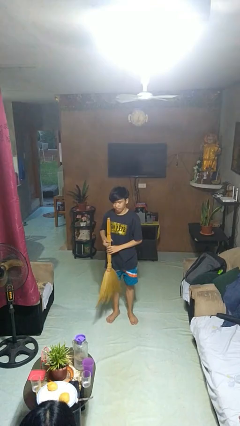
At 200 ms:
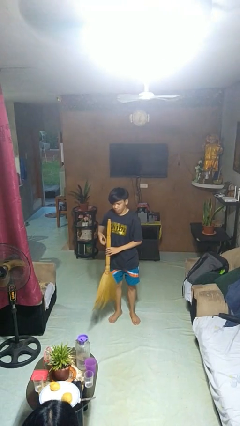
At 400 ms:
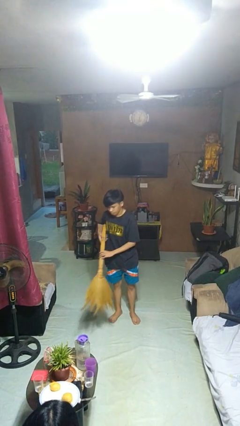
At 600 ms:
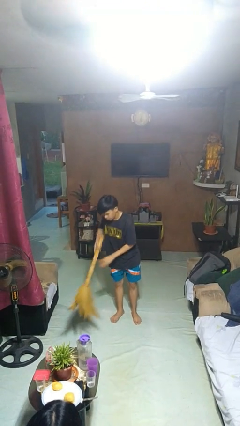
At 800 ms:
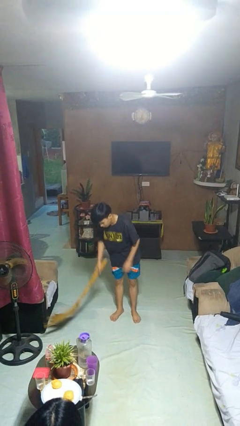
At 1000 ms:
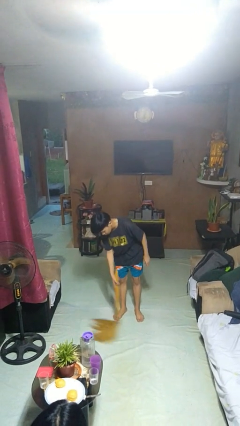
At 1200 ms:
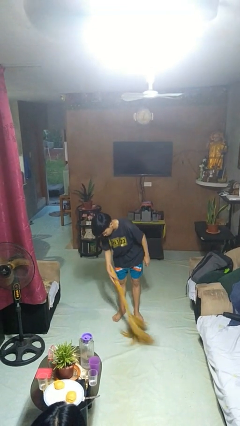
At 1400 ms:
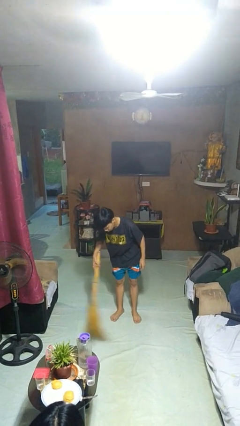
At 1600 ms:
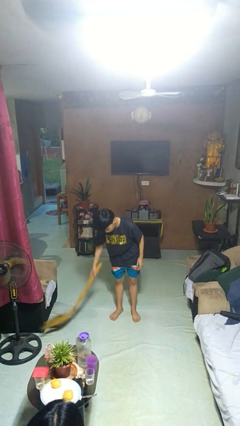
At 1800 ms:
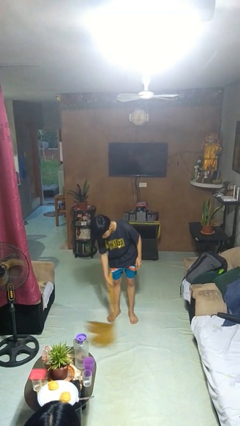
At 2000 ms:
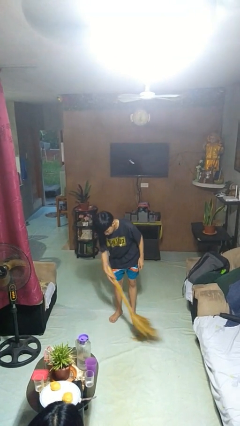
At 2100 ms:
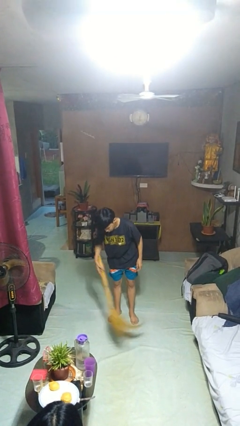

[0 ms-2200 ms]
person sweeps floor

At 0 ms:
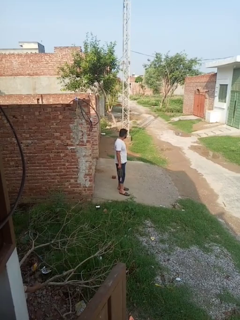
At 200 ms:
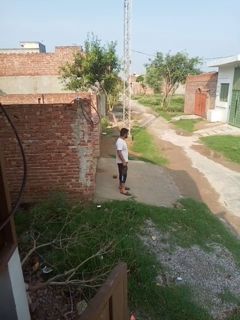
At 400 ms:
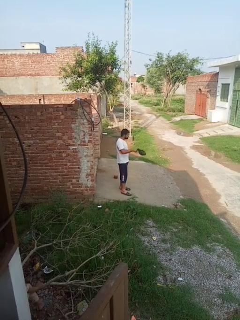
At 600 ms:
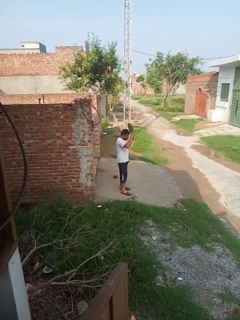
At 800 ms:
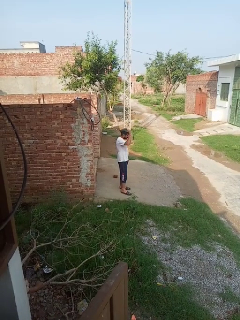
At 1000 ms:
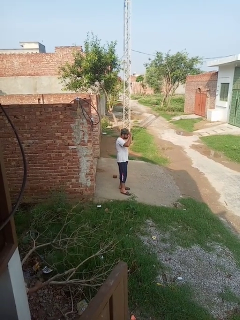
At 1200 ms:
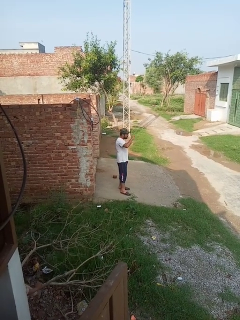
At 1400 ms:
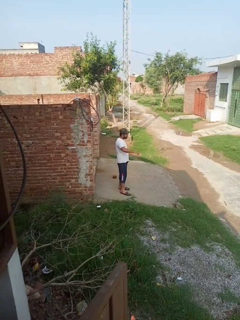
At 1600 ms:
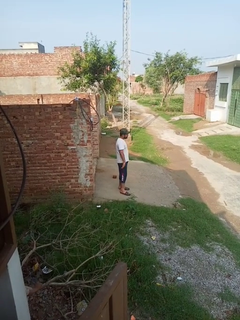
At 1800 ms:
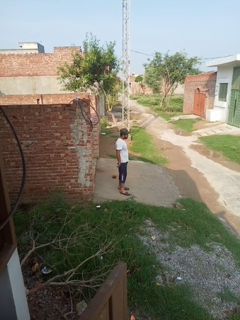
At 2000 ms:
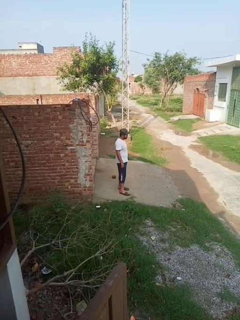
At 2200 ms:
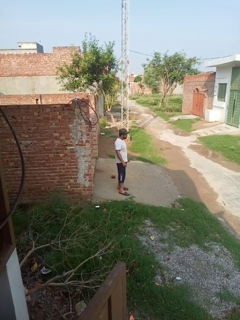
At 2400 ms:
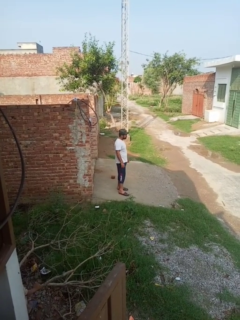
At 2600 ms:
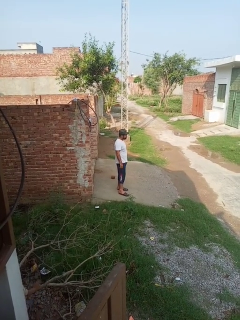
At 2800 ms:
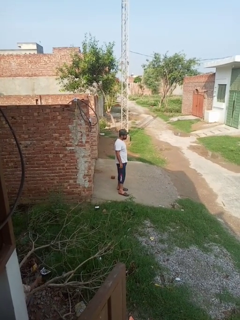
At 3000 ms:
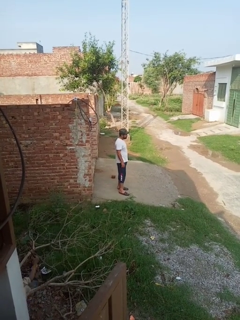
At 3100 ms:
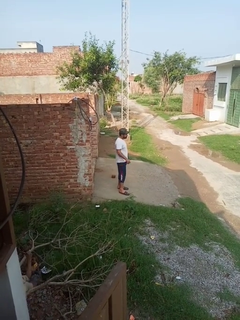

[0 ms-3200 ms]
person puts on hat

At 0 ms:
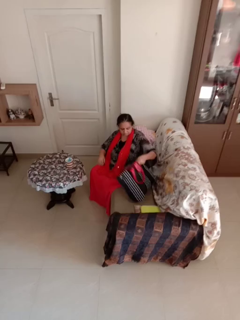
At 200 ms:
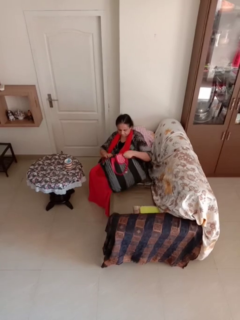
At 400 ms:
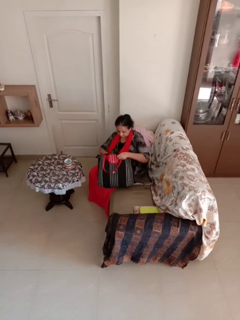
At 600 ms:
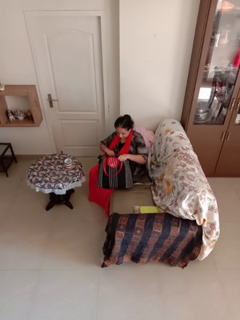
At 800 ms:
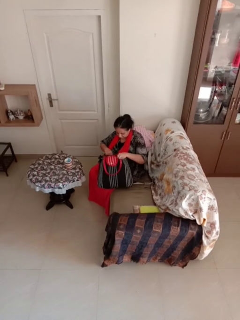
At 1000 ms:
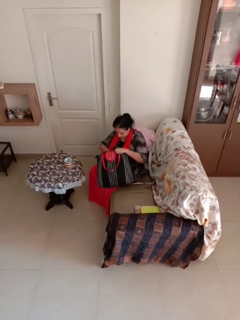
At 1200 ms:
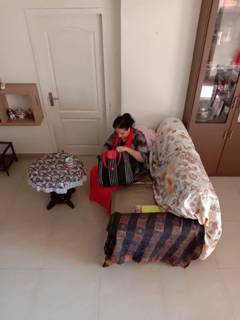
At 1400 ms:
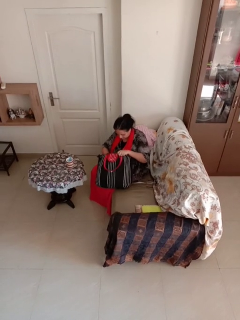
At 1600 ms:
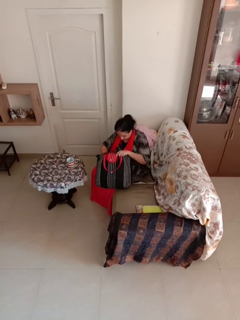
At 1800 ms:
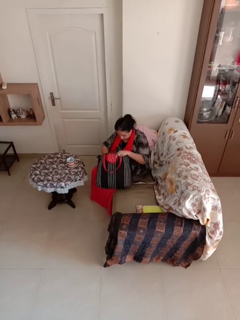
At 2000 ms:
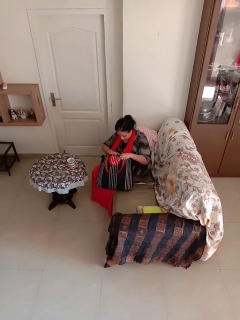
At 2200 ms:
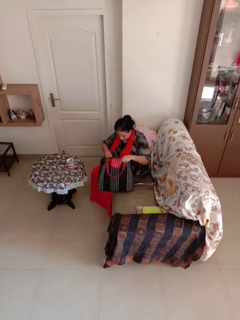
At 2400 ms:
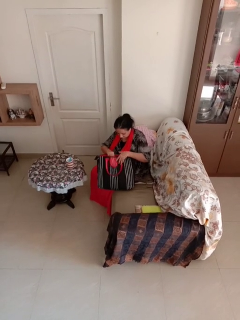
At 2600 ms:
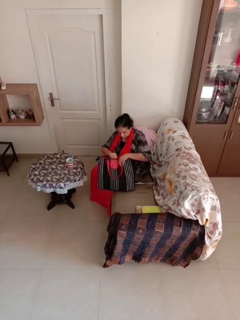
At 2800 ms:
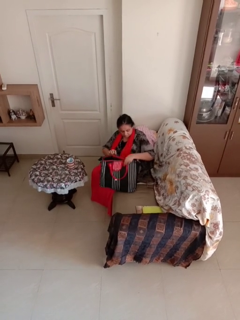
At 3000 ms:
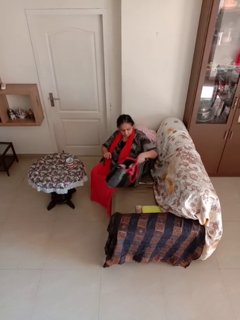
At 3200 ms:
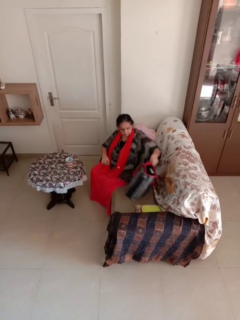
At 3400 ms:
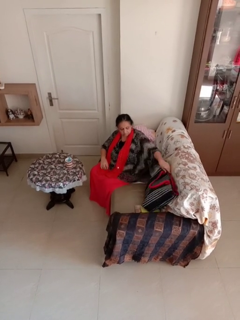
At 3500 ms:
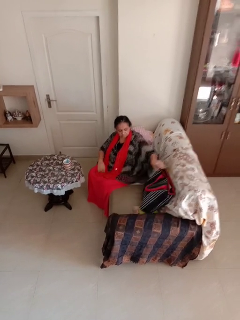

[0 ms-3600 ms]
person searches in bag

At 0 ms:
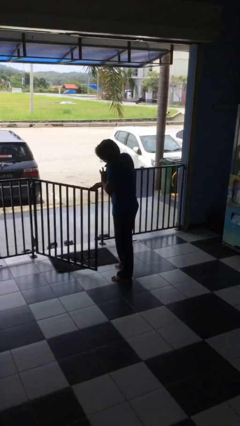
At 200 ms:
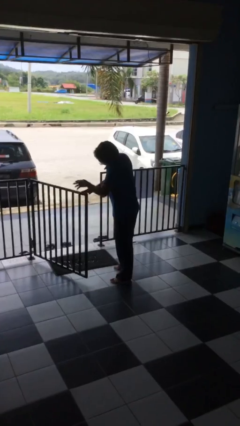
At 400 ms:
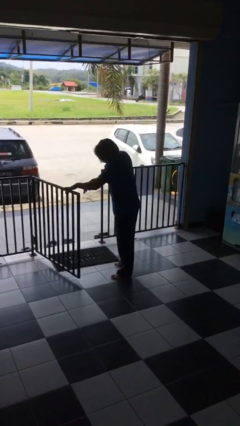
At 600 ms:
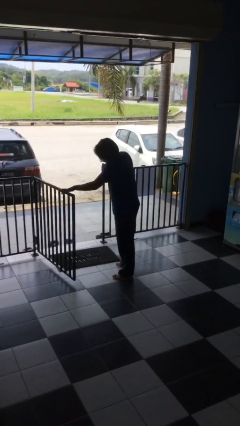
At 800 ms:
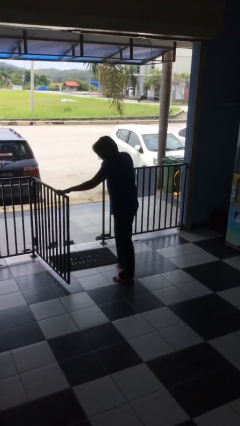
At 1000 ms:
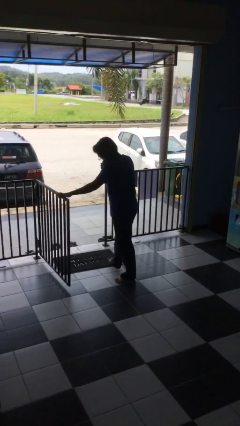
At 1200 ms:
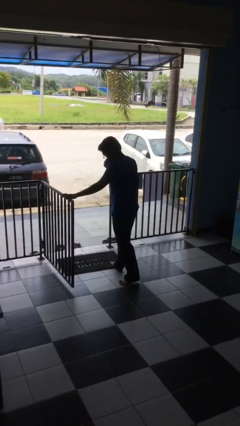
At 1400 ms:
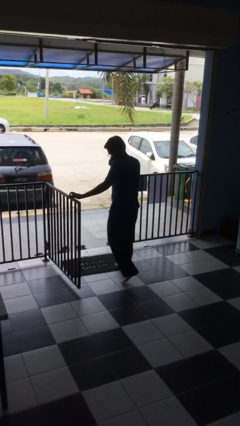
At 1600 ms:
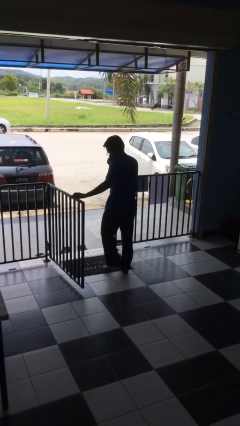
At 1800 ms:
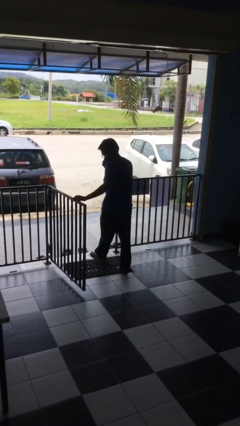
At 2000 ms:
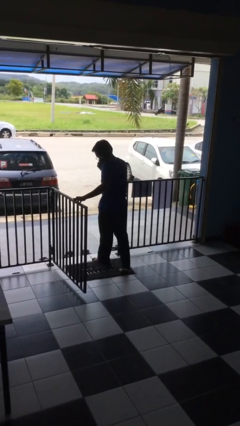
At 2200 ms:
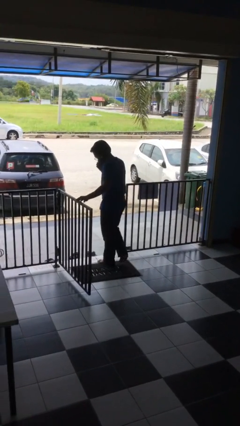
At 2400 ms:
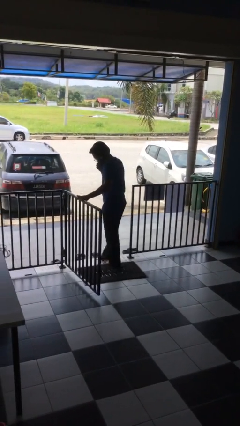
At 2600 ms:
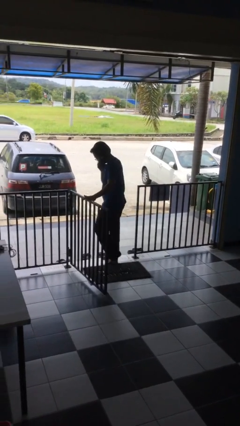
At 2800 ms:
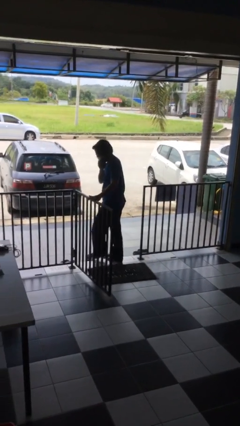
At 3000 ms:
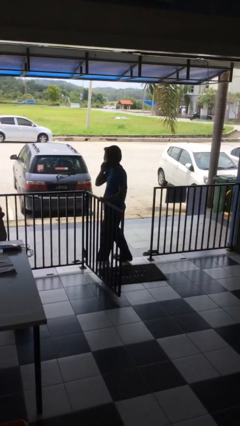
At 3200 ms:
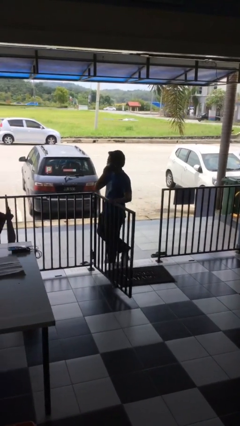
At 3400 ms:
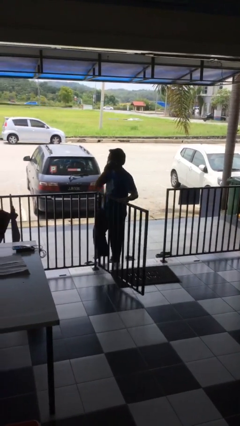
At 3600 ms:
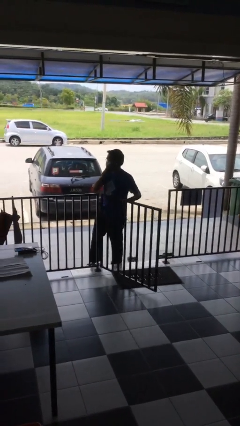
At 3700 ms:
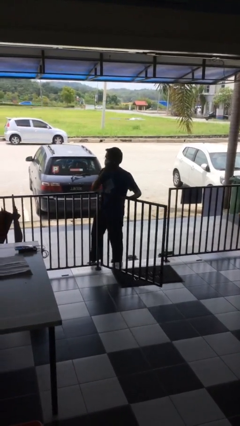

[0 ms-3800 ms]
person exits scene through structure

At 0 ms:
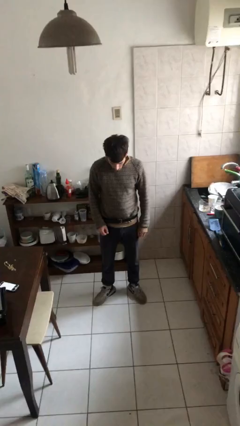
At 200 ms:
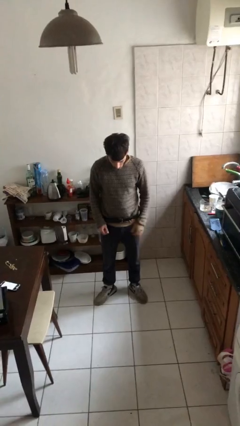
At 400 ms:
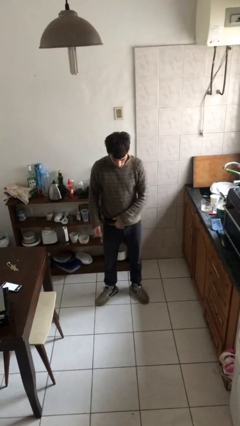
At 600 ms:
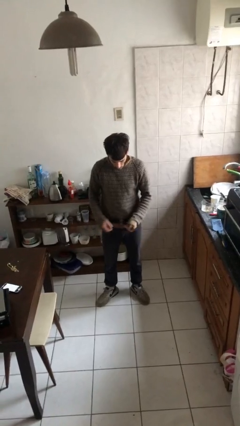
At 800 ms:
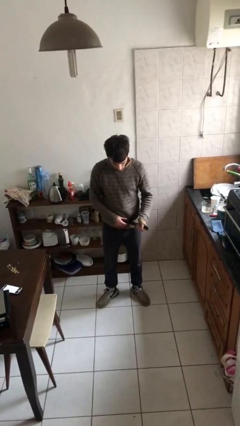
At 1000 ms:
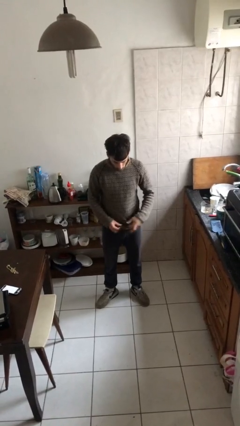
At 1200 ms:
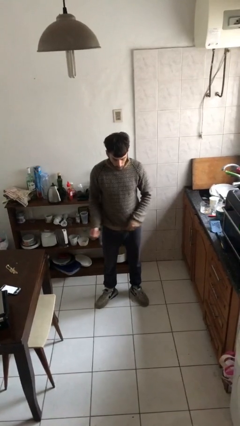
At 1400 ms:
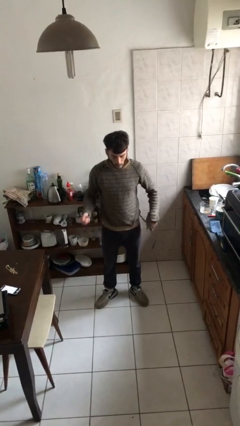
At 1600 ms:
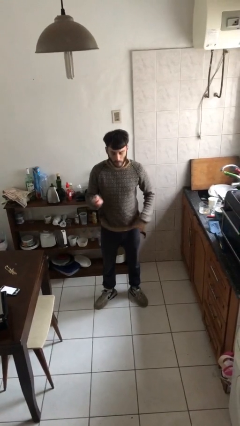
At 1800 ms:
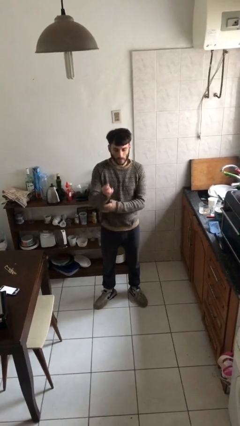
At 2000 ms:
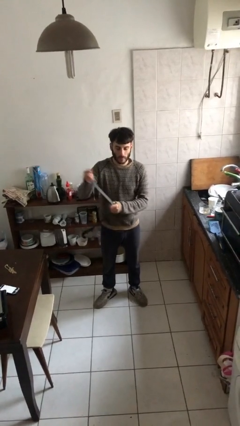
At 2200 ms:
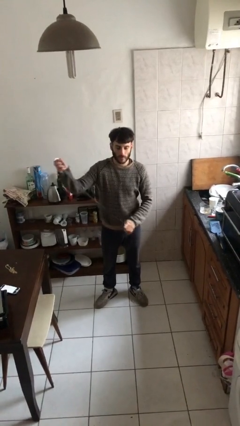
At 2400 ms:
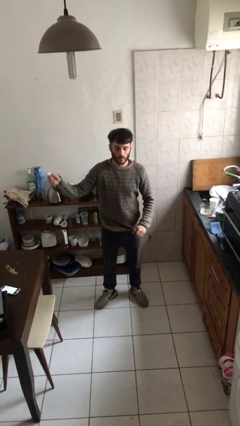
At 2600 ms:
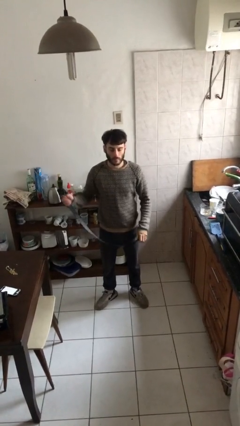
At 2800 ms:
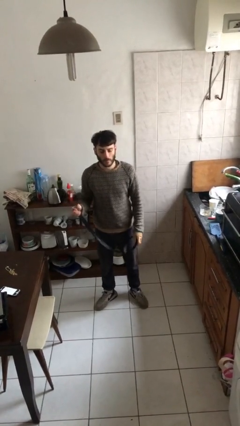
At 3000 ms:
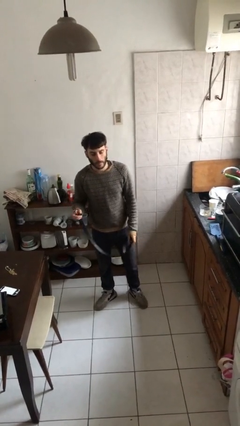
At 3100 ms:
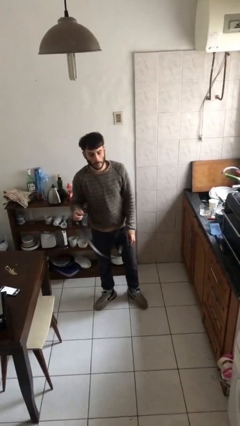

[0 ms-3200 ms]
person takes off belt

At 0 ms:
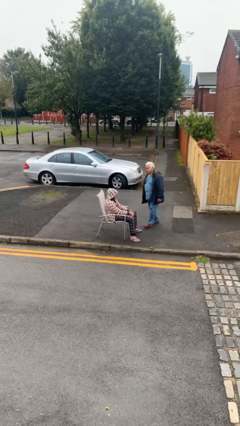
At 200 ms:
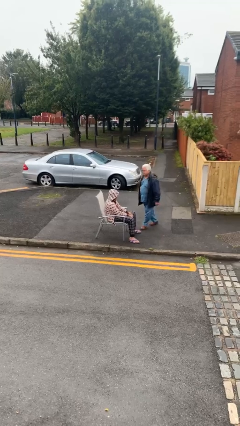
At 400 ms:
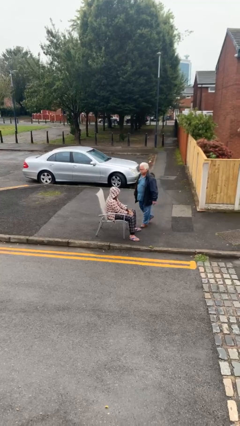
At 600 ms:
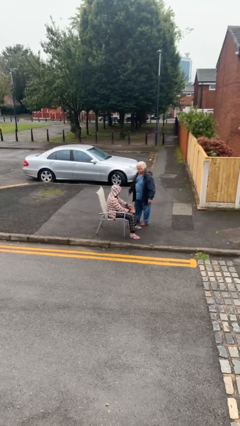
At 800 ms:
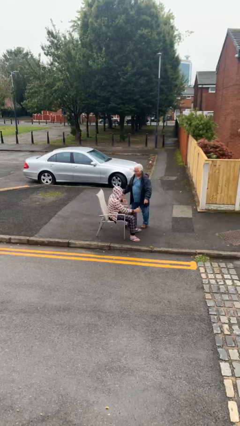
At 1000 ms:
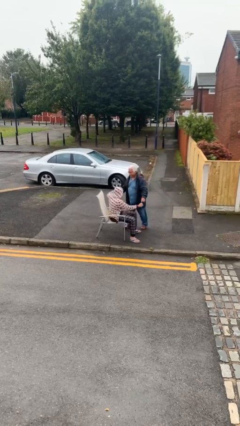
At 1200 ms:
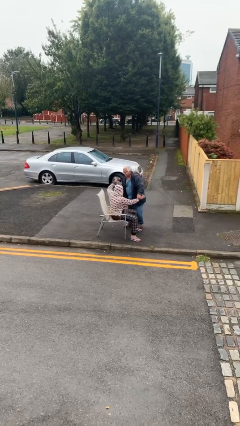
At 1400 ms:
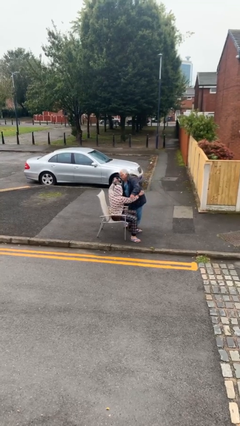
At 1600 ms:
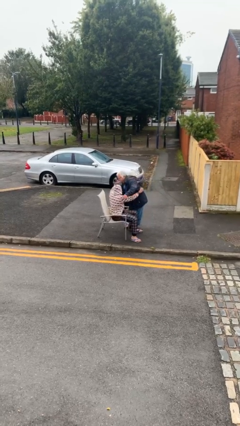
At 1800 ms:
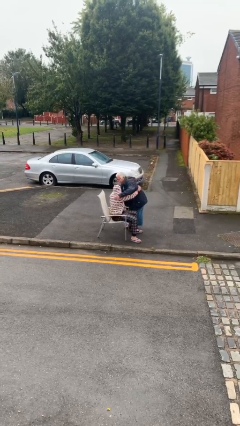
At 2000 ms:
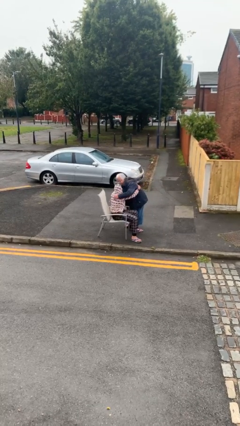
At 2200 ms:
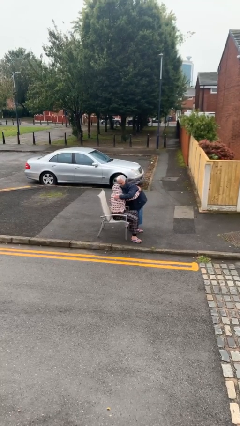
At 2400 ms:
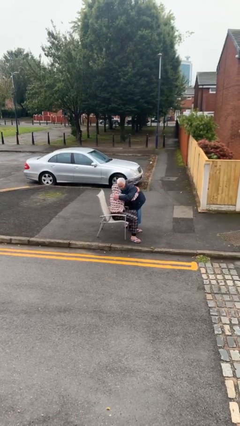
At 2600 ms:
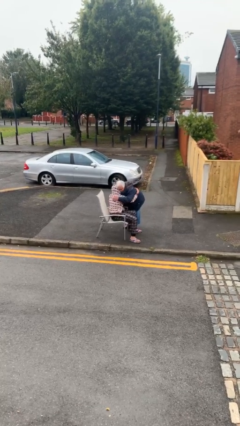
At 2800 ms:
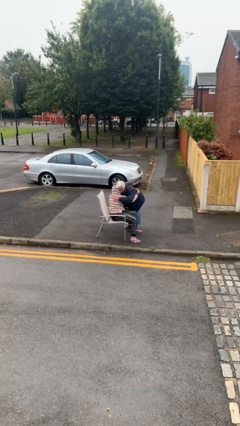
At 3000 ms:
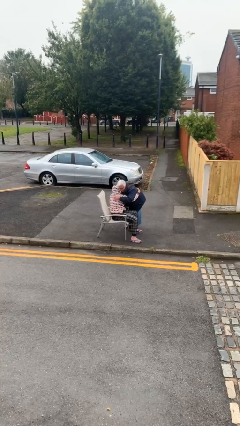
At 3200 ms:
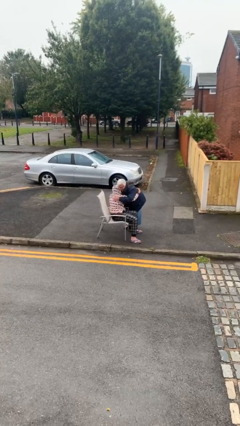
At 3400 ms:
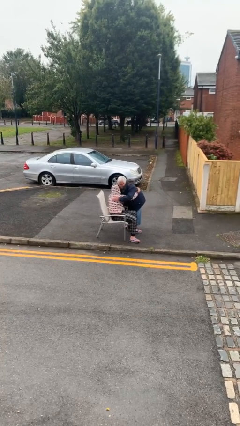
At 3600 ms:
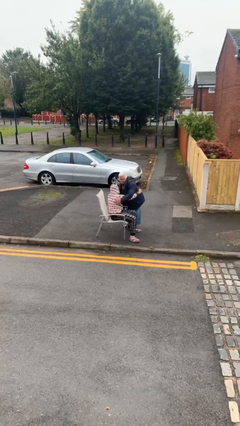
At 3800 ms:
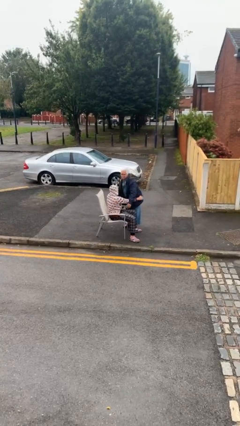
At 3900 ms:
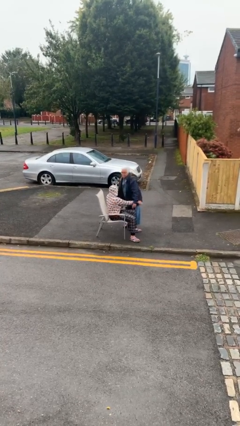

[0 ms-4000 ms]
person embraces person
